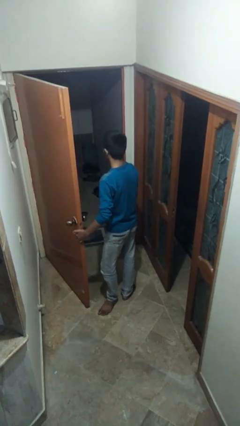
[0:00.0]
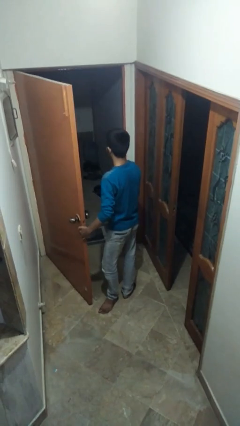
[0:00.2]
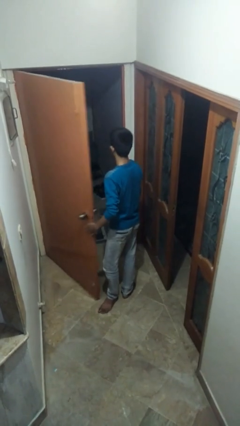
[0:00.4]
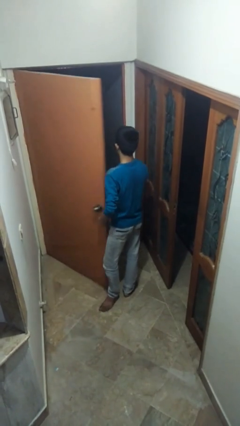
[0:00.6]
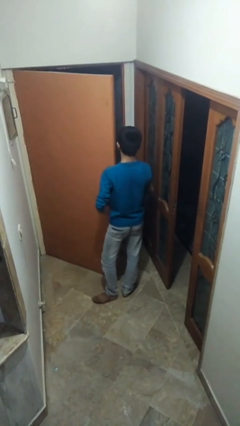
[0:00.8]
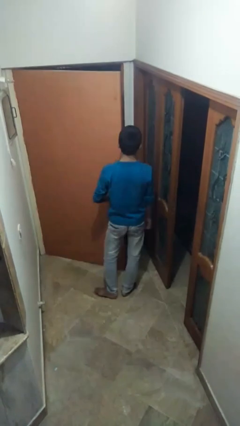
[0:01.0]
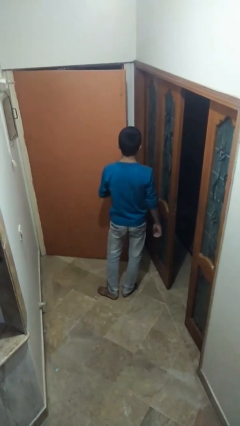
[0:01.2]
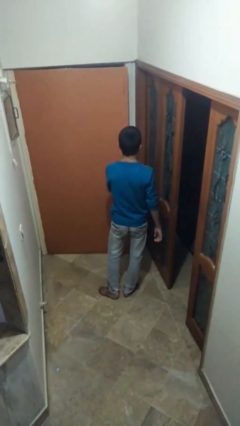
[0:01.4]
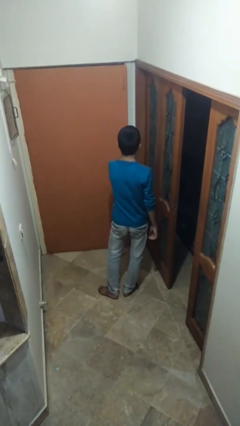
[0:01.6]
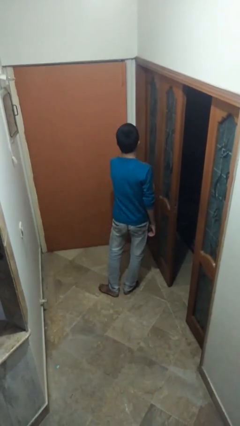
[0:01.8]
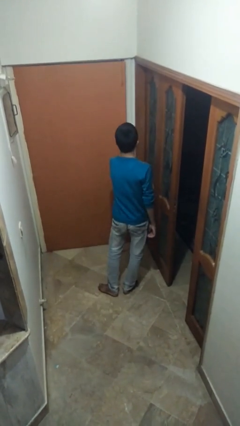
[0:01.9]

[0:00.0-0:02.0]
person closes facility door

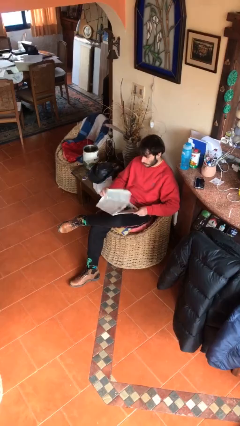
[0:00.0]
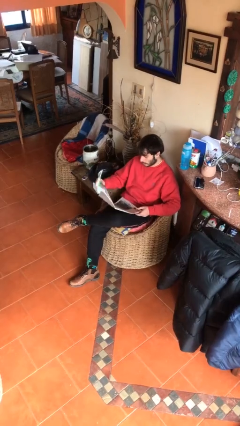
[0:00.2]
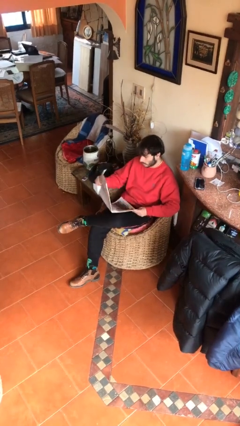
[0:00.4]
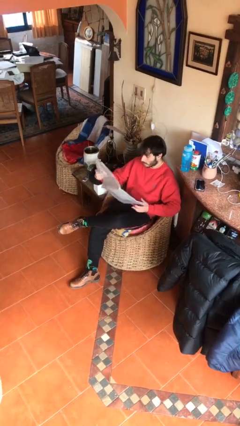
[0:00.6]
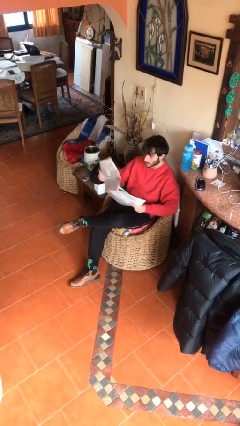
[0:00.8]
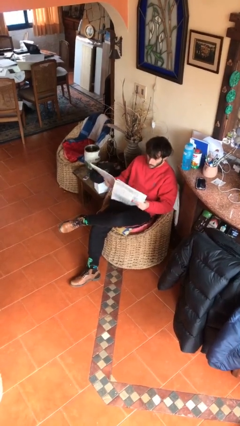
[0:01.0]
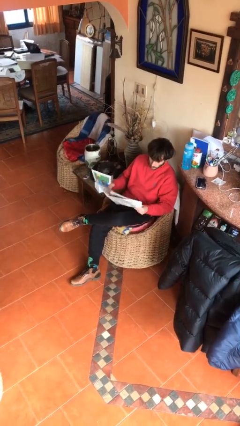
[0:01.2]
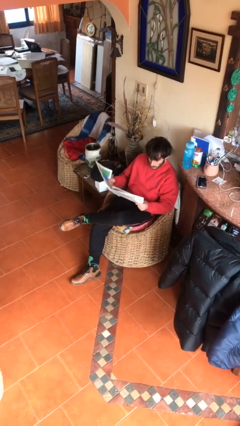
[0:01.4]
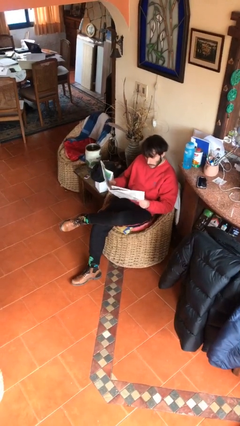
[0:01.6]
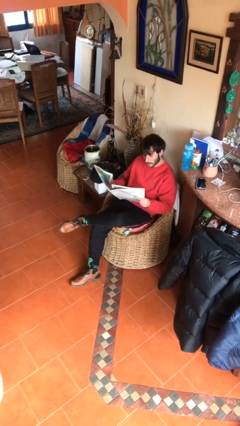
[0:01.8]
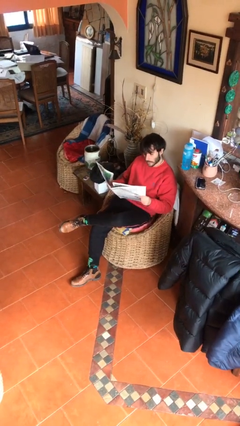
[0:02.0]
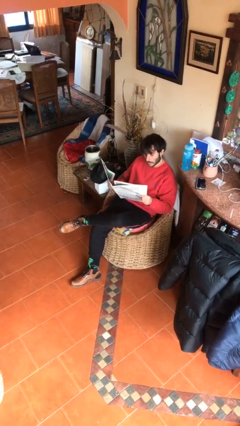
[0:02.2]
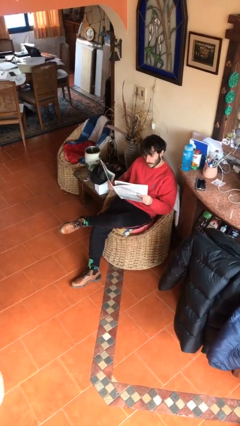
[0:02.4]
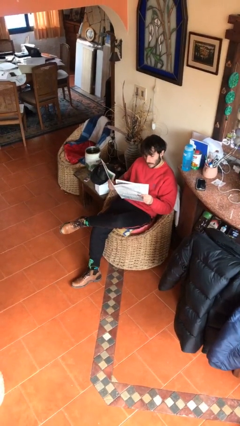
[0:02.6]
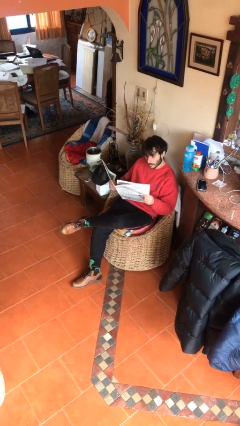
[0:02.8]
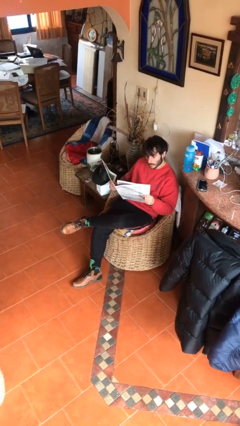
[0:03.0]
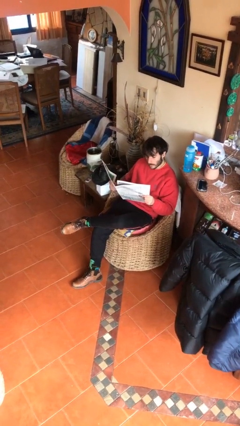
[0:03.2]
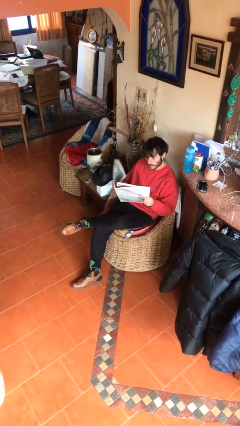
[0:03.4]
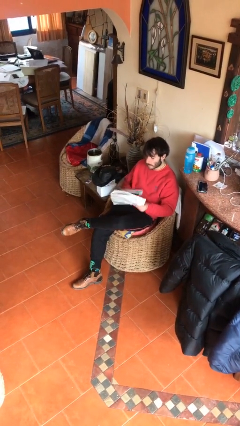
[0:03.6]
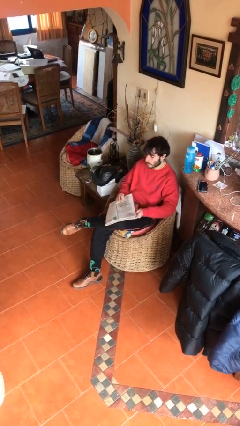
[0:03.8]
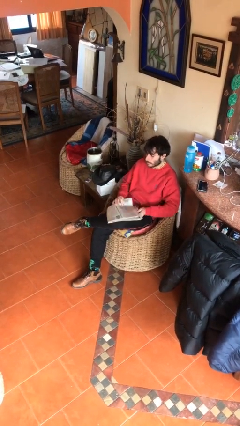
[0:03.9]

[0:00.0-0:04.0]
person reads newspaper

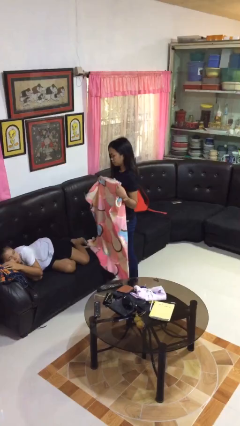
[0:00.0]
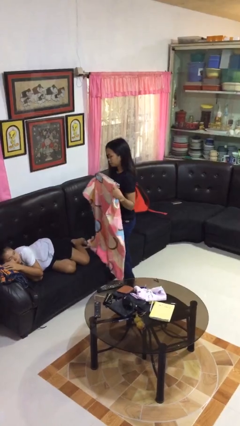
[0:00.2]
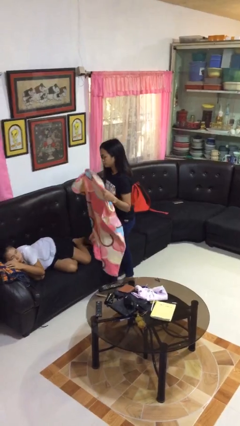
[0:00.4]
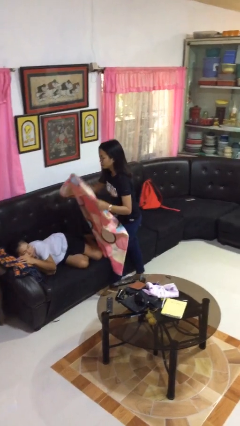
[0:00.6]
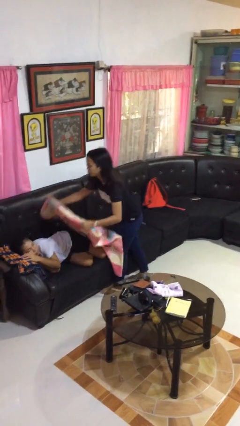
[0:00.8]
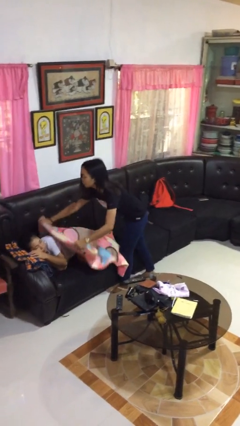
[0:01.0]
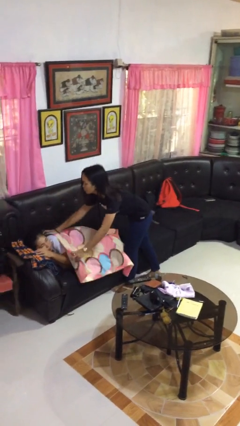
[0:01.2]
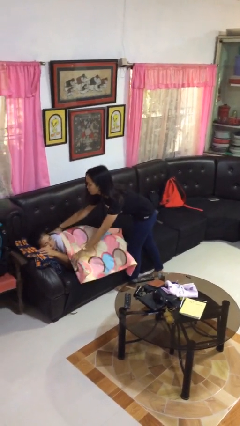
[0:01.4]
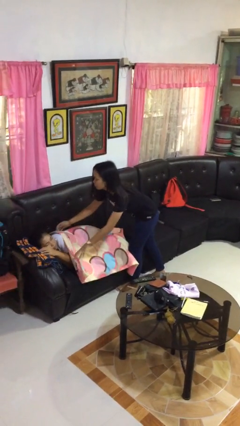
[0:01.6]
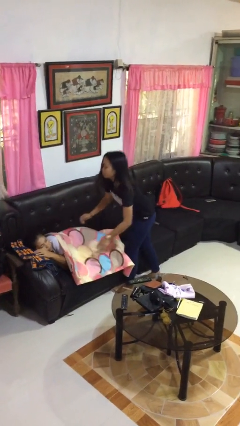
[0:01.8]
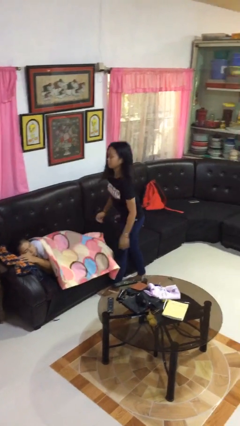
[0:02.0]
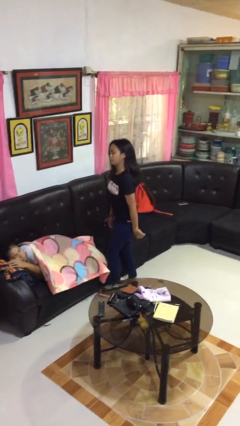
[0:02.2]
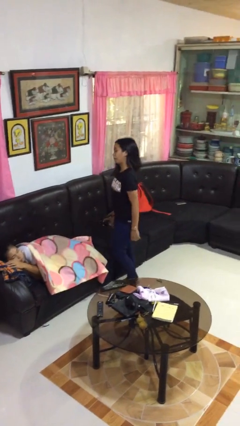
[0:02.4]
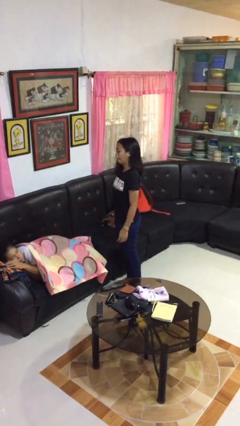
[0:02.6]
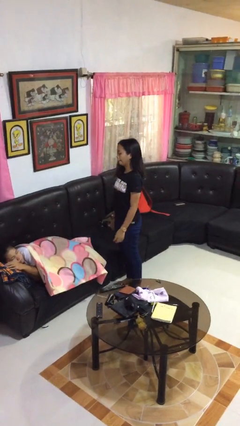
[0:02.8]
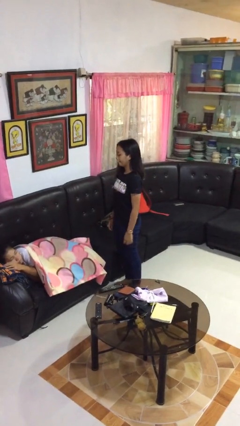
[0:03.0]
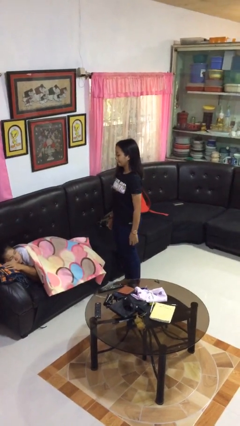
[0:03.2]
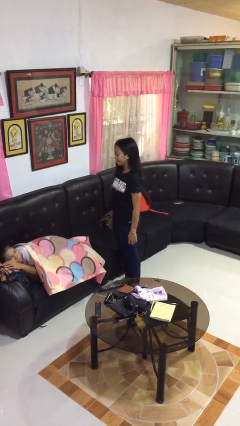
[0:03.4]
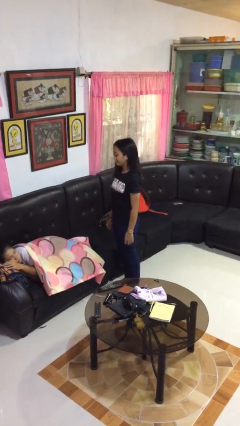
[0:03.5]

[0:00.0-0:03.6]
person covers friend with blanket

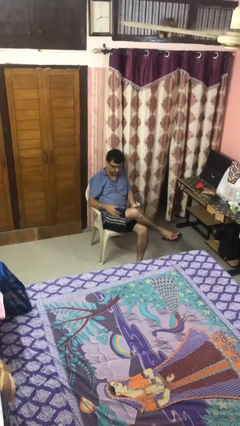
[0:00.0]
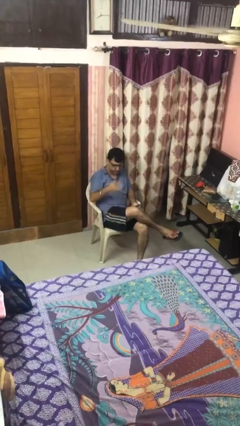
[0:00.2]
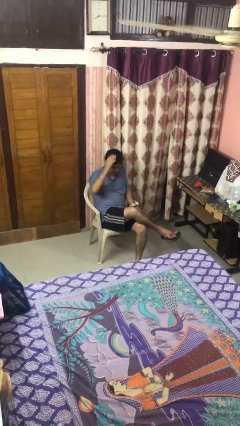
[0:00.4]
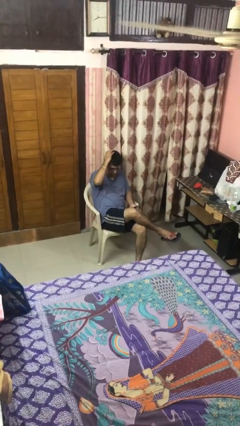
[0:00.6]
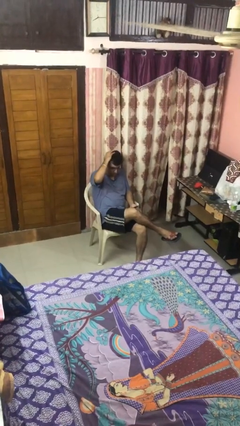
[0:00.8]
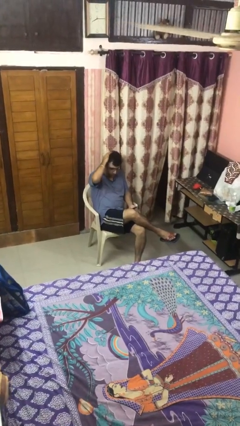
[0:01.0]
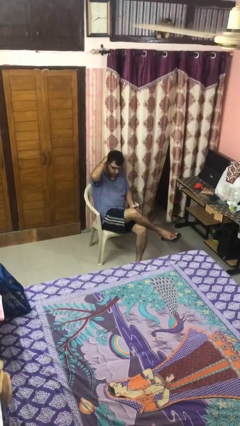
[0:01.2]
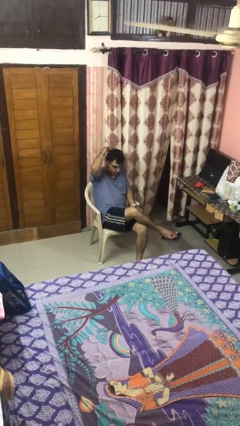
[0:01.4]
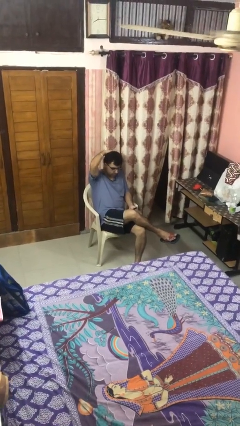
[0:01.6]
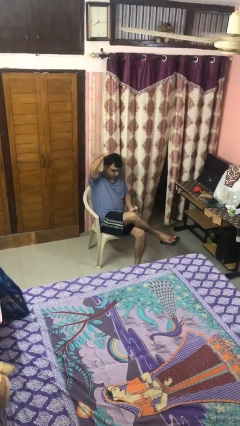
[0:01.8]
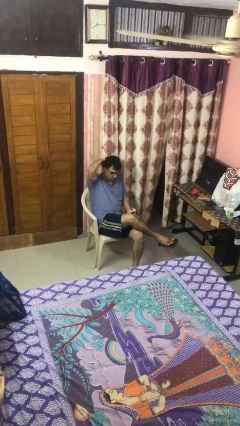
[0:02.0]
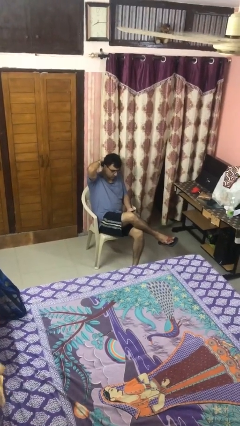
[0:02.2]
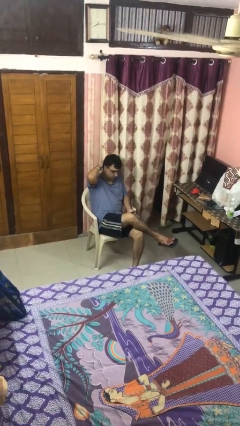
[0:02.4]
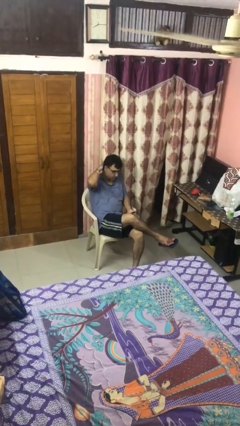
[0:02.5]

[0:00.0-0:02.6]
person strokes hair

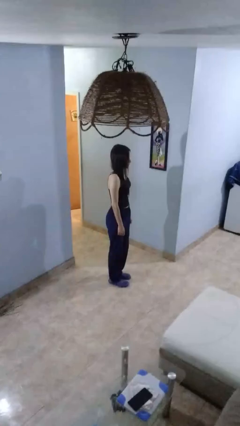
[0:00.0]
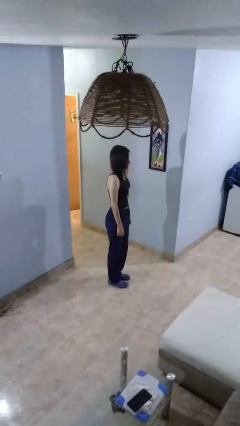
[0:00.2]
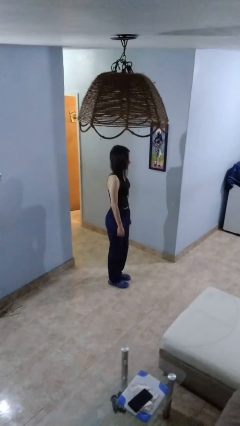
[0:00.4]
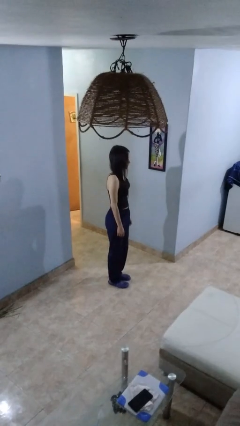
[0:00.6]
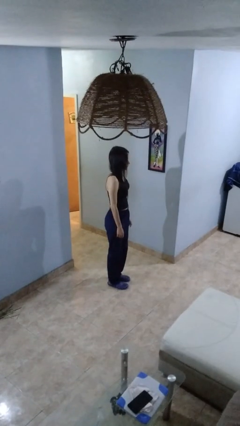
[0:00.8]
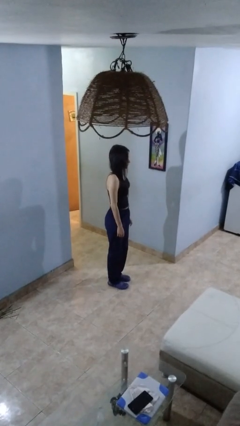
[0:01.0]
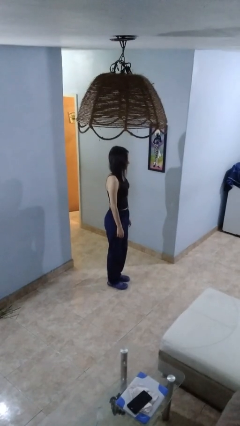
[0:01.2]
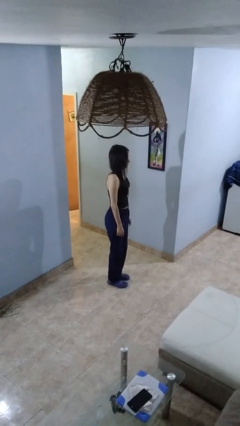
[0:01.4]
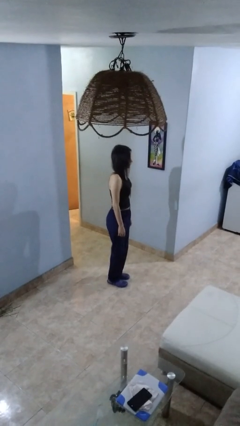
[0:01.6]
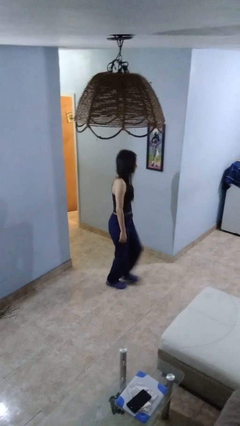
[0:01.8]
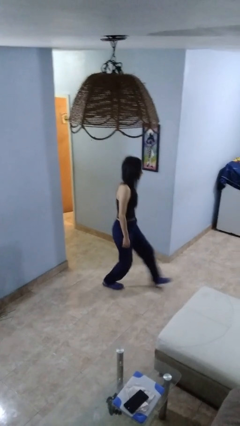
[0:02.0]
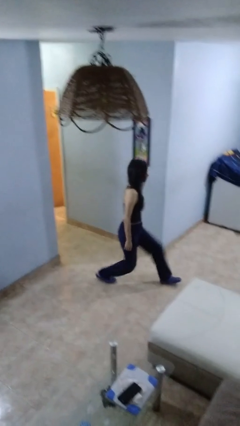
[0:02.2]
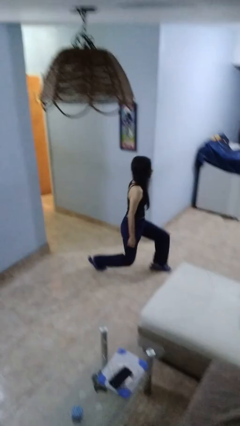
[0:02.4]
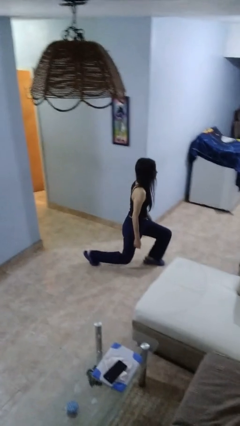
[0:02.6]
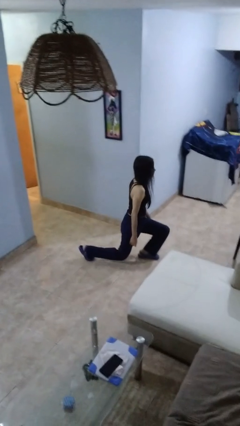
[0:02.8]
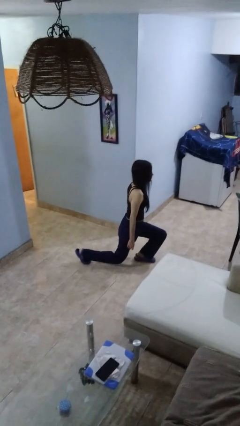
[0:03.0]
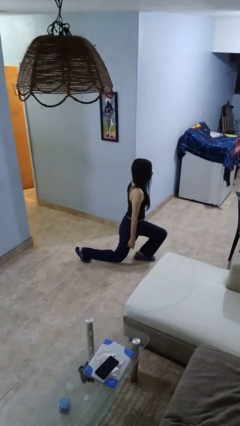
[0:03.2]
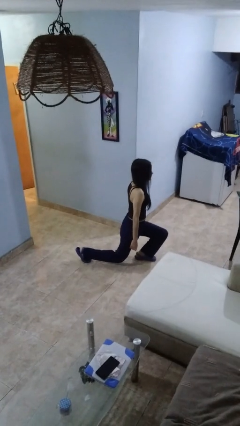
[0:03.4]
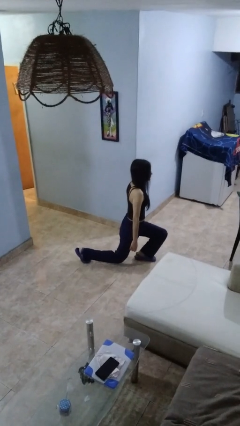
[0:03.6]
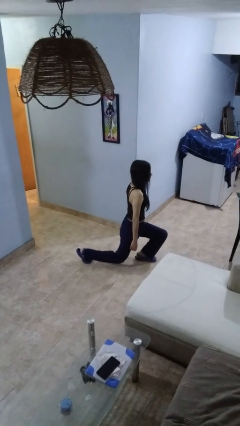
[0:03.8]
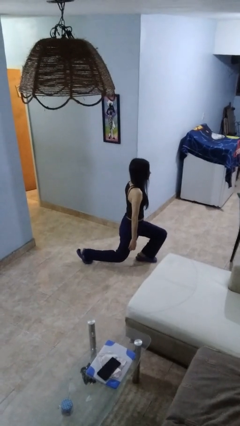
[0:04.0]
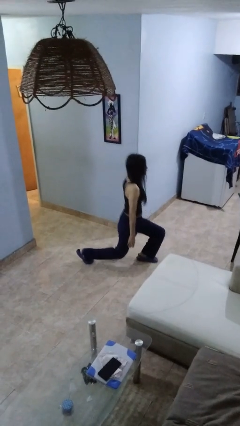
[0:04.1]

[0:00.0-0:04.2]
person exercises with lunges

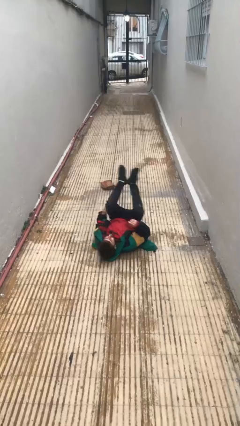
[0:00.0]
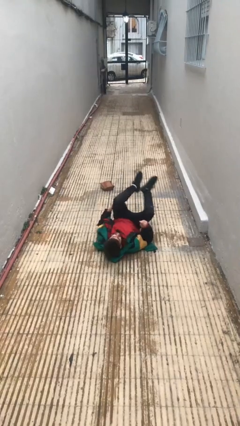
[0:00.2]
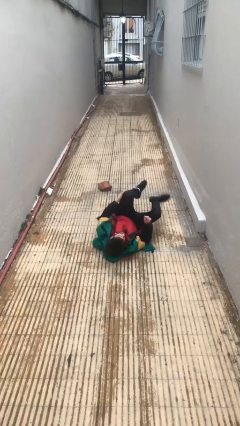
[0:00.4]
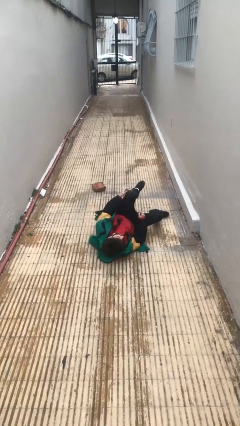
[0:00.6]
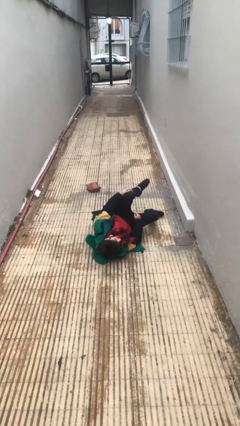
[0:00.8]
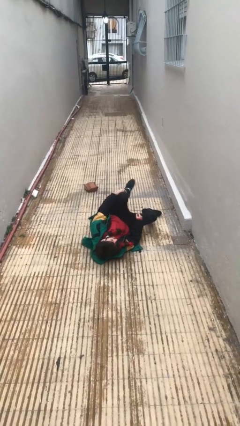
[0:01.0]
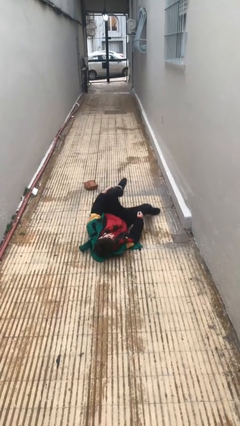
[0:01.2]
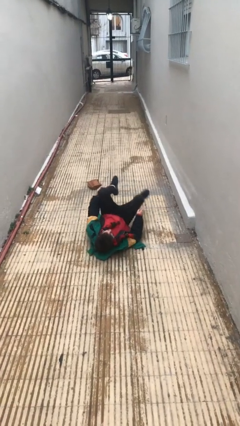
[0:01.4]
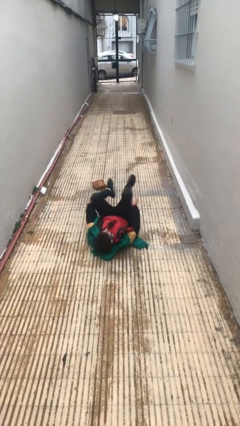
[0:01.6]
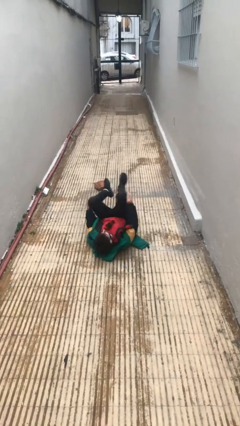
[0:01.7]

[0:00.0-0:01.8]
person lies down on floor
